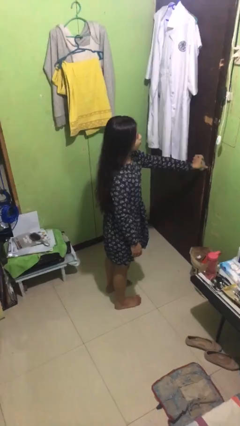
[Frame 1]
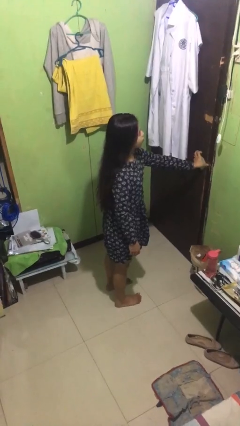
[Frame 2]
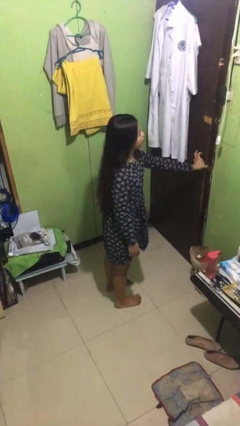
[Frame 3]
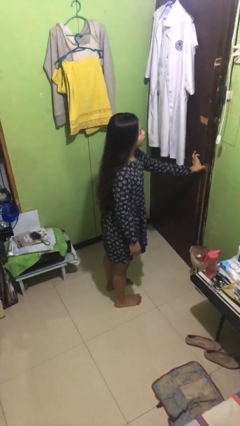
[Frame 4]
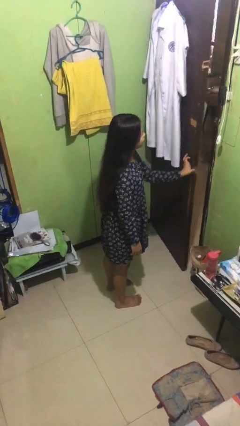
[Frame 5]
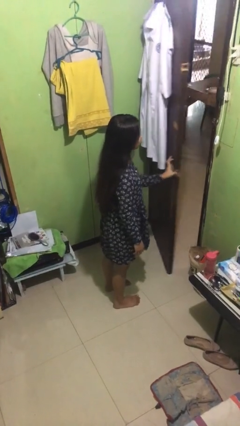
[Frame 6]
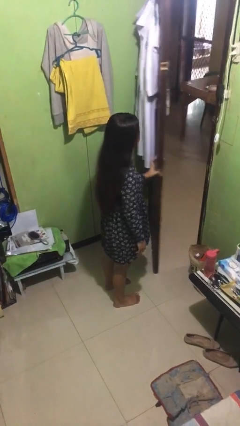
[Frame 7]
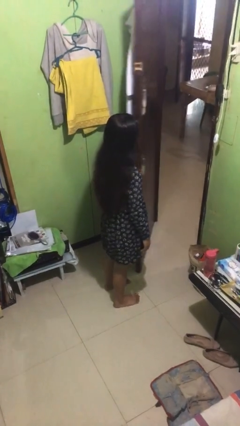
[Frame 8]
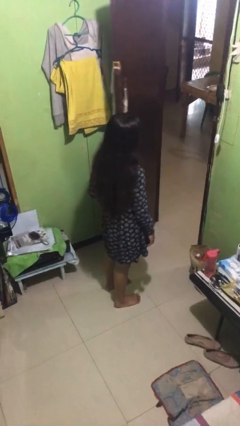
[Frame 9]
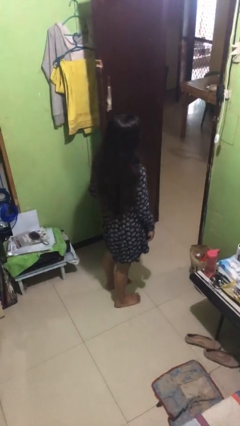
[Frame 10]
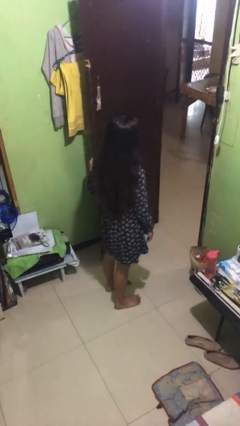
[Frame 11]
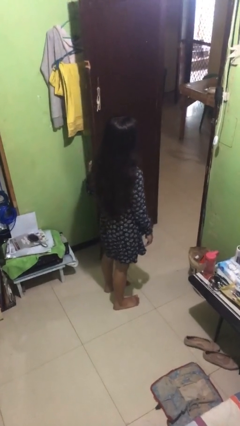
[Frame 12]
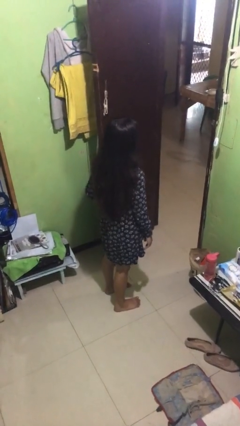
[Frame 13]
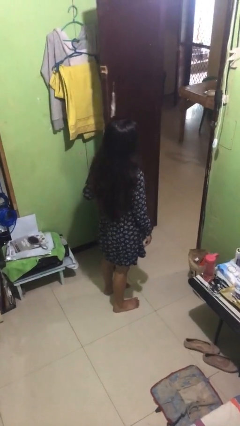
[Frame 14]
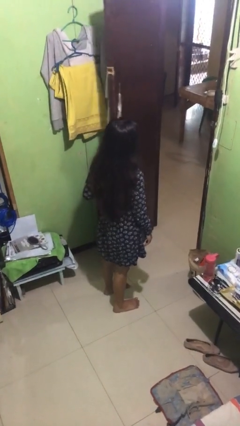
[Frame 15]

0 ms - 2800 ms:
person opens facility door

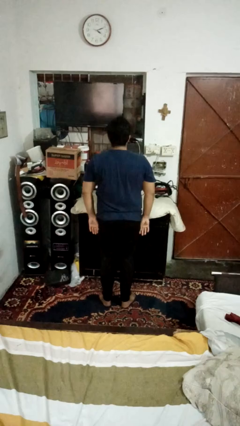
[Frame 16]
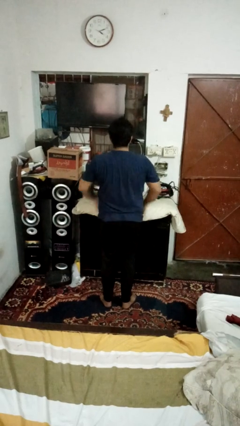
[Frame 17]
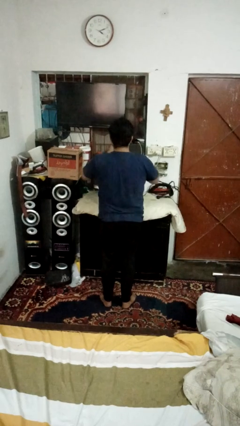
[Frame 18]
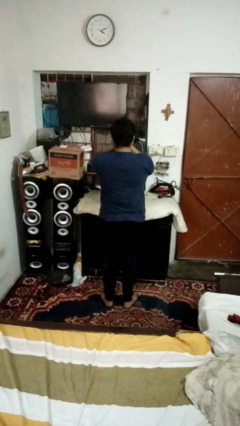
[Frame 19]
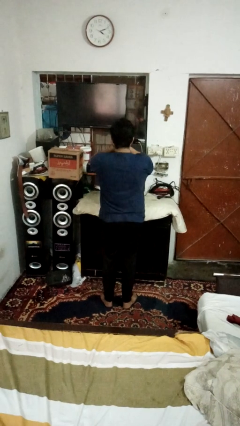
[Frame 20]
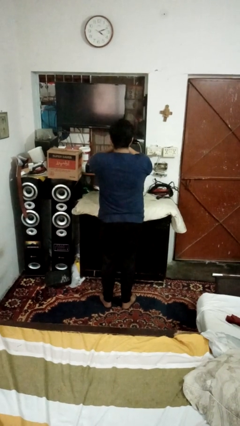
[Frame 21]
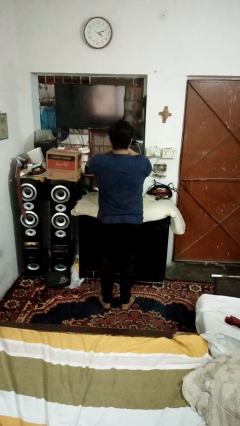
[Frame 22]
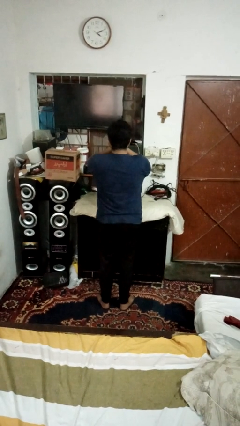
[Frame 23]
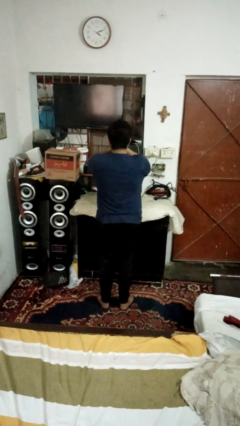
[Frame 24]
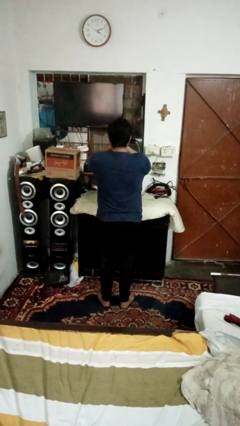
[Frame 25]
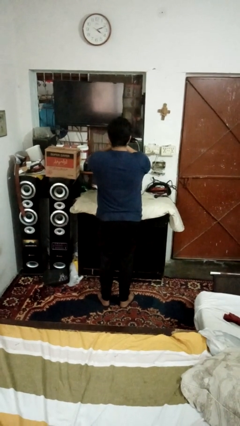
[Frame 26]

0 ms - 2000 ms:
person covers face with hands

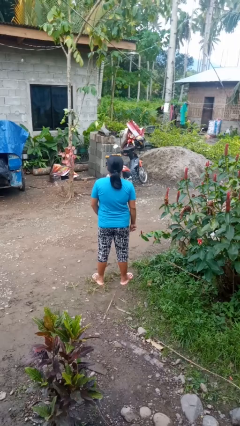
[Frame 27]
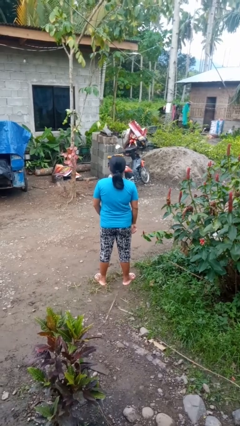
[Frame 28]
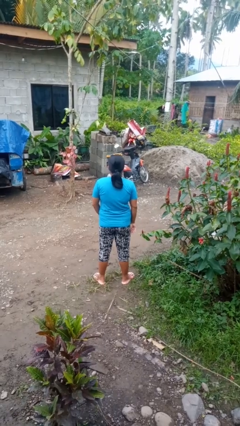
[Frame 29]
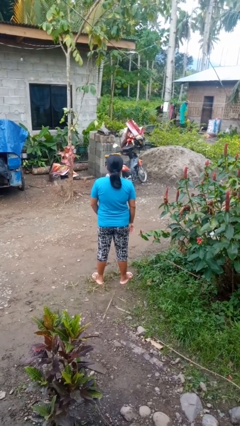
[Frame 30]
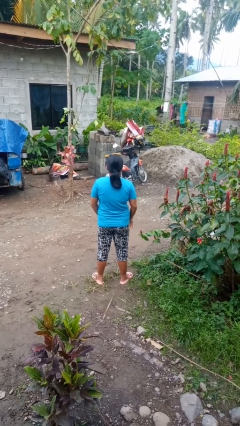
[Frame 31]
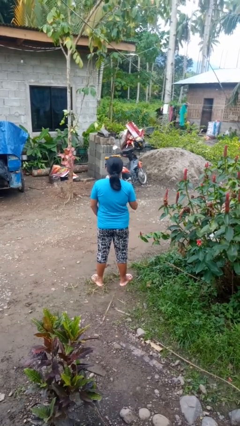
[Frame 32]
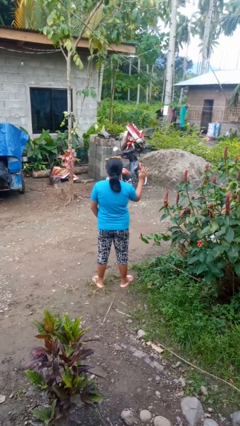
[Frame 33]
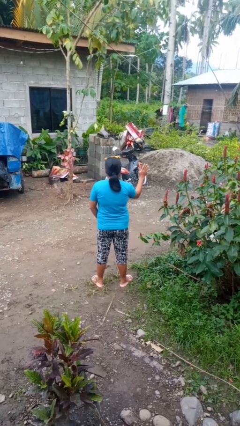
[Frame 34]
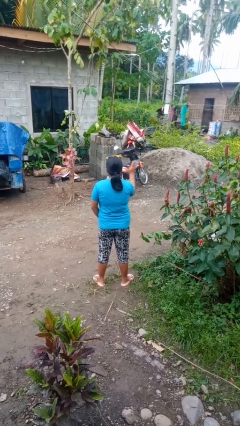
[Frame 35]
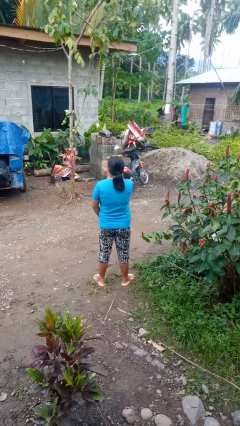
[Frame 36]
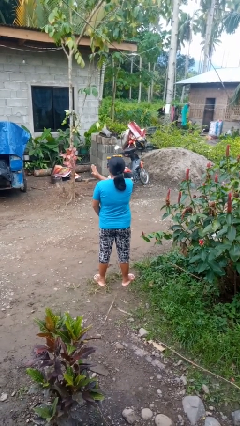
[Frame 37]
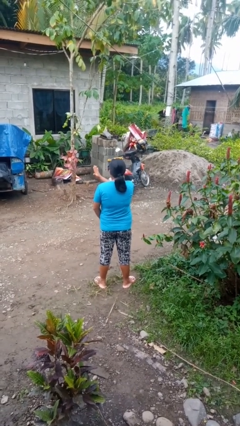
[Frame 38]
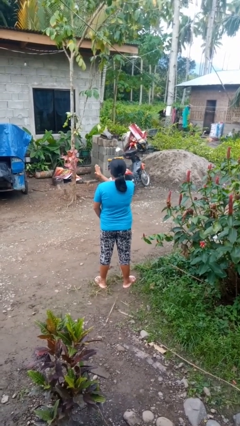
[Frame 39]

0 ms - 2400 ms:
person gestures swipe left

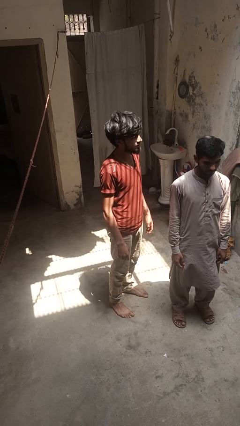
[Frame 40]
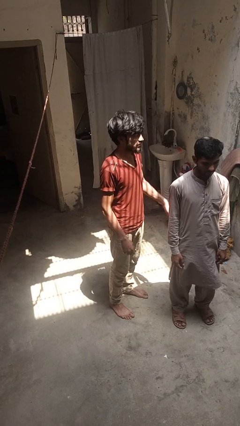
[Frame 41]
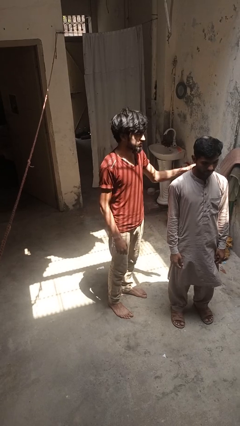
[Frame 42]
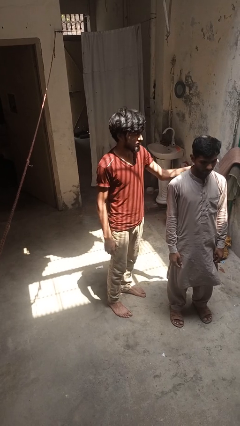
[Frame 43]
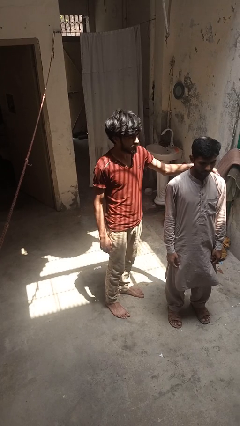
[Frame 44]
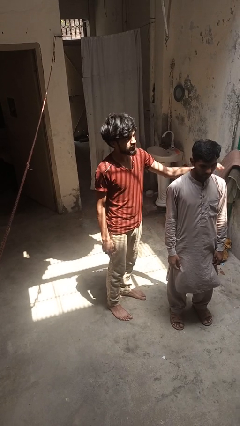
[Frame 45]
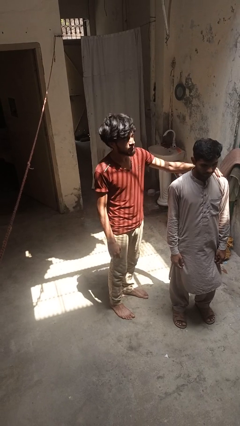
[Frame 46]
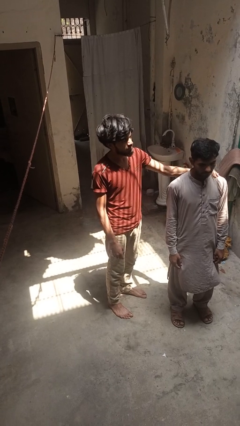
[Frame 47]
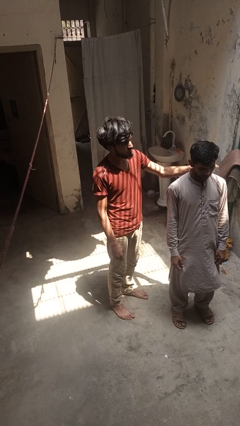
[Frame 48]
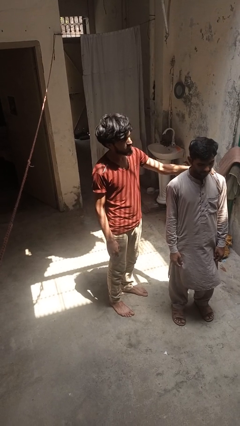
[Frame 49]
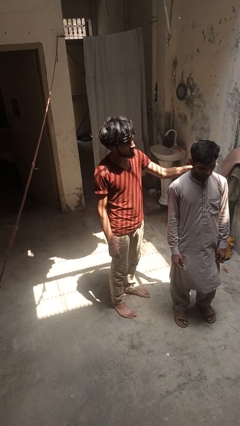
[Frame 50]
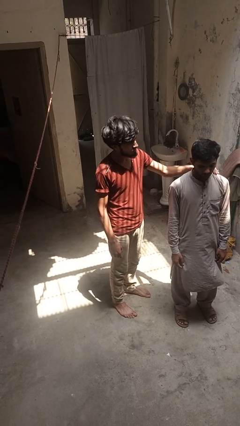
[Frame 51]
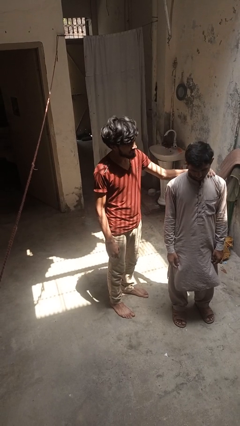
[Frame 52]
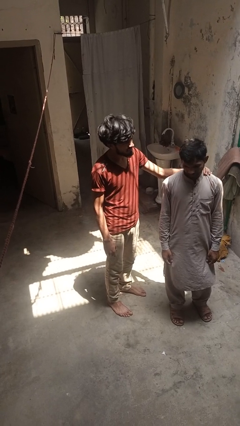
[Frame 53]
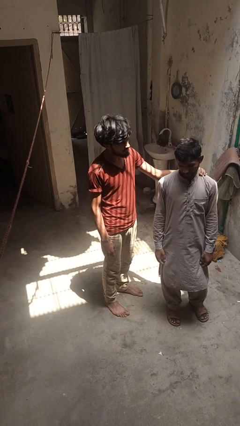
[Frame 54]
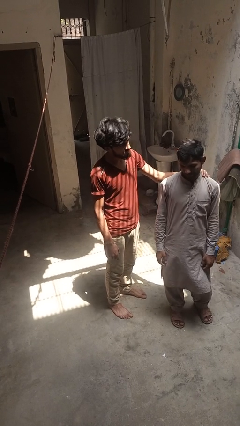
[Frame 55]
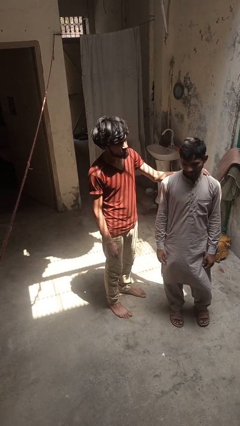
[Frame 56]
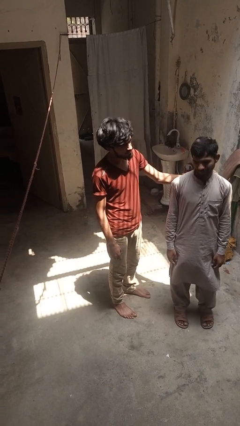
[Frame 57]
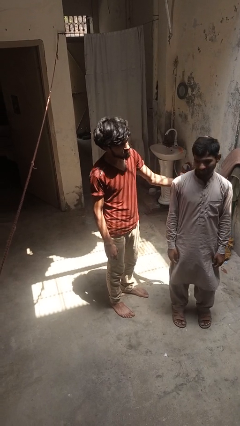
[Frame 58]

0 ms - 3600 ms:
person pounds shoulders of person

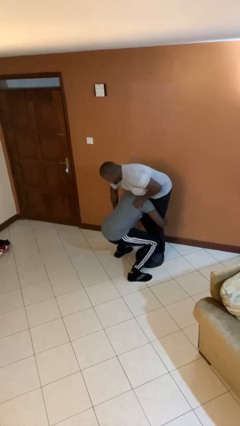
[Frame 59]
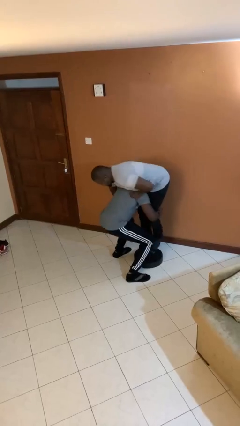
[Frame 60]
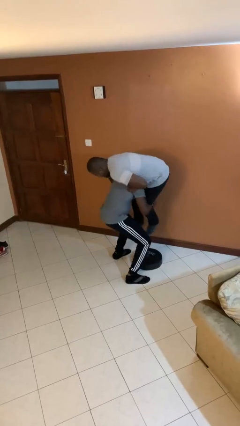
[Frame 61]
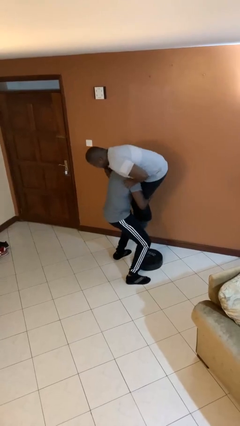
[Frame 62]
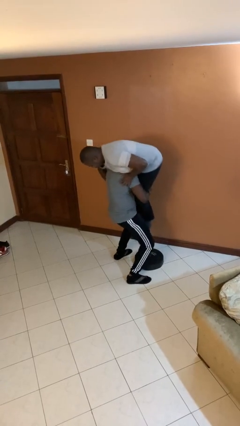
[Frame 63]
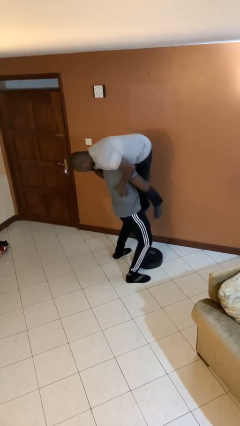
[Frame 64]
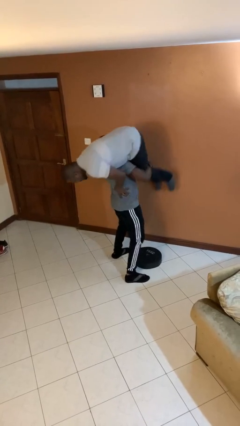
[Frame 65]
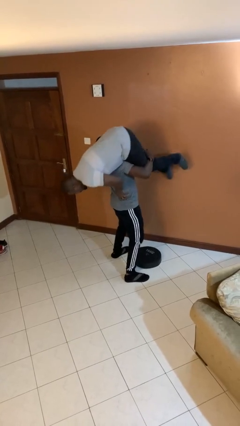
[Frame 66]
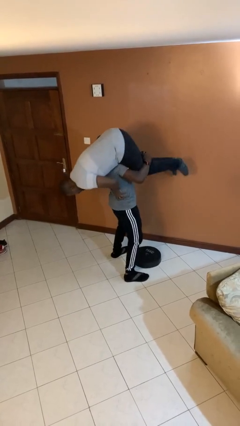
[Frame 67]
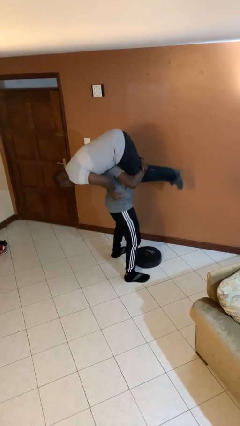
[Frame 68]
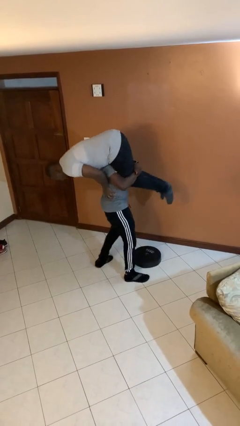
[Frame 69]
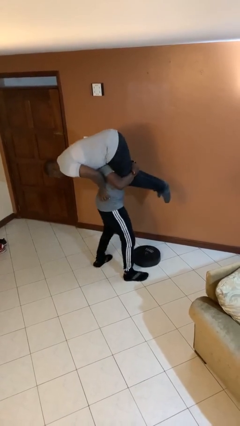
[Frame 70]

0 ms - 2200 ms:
person carries person over shoulder

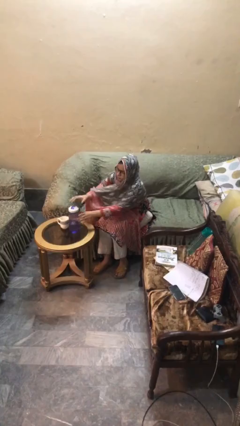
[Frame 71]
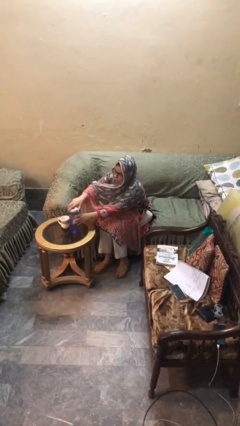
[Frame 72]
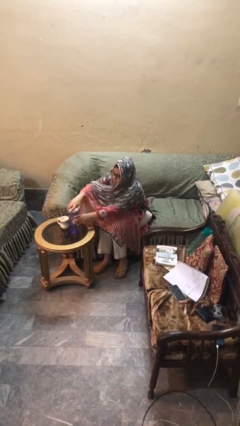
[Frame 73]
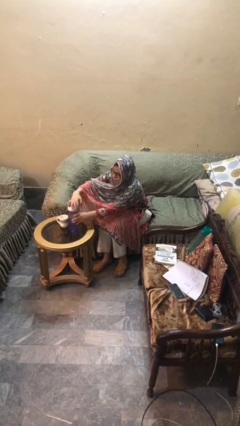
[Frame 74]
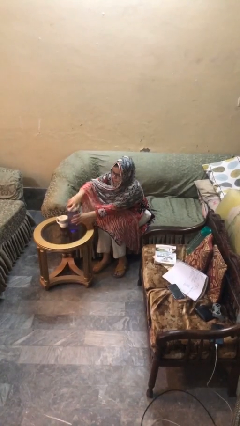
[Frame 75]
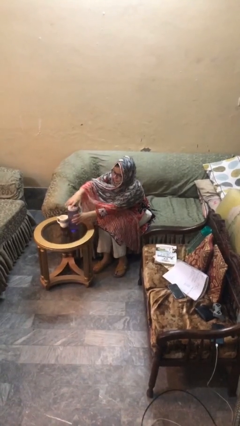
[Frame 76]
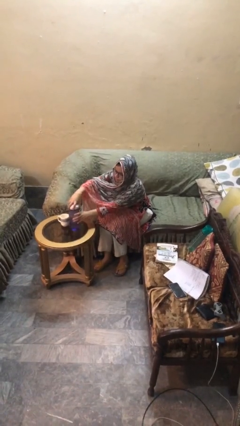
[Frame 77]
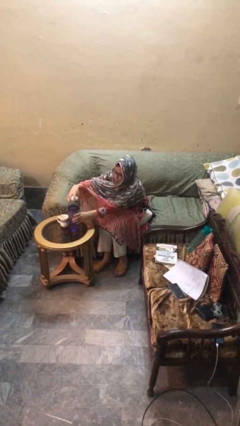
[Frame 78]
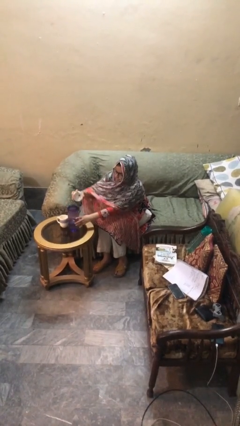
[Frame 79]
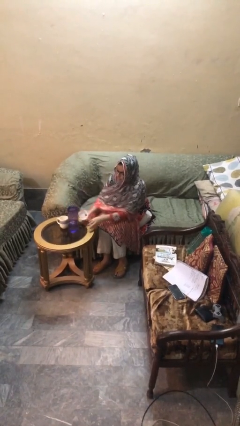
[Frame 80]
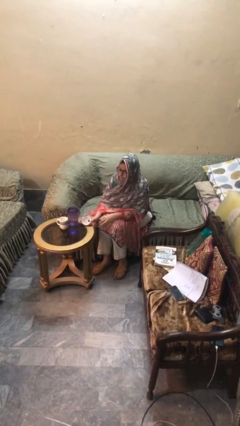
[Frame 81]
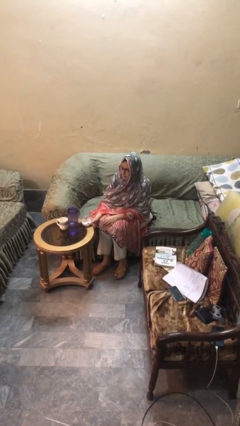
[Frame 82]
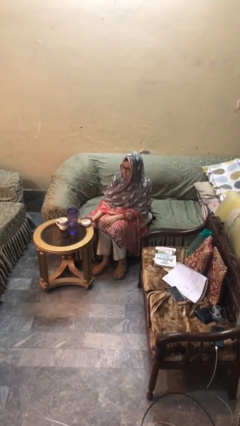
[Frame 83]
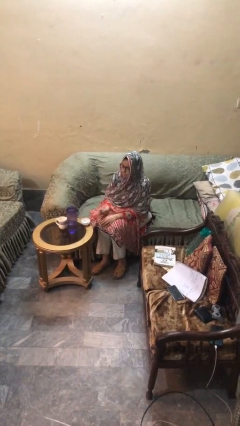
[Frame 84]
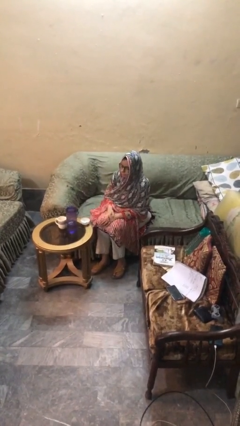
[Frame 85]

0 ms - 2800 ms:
person unscrews lid from bottle

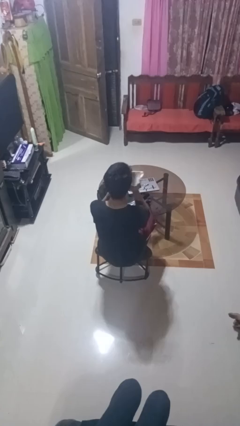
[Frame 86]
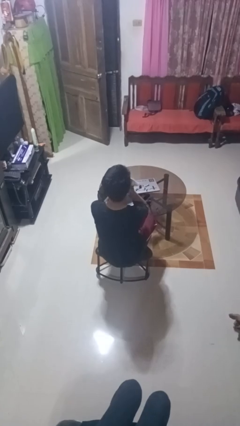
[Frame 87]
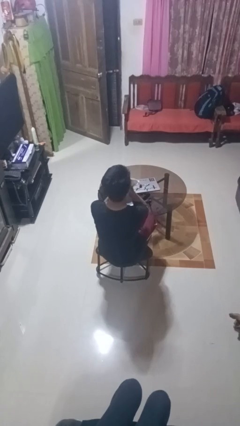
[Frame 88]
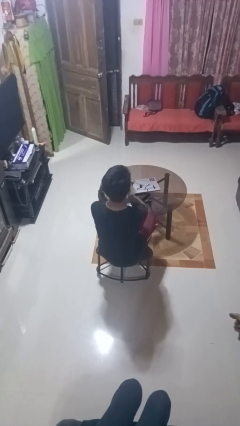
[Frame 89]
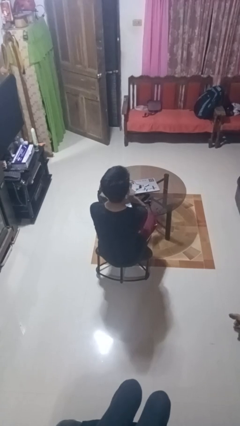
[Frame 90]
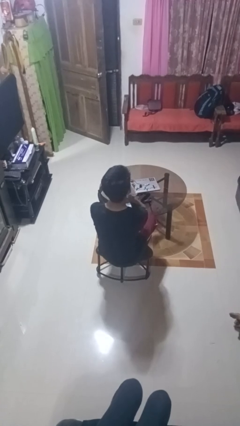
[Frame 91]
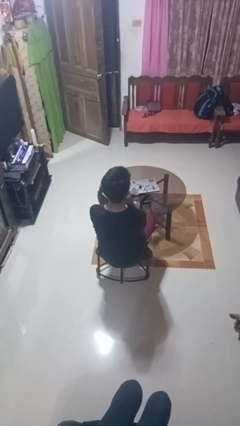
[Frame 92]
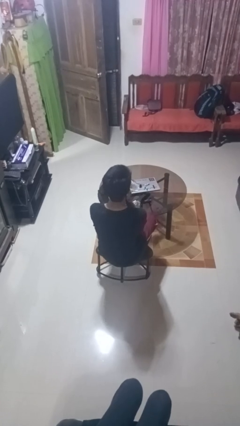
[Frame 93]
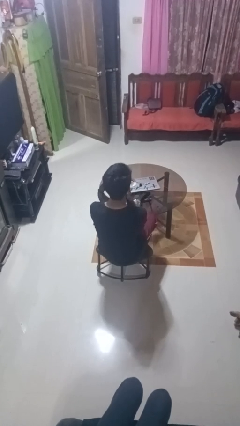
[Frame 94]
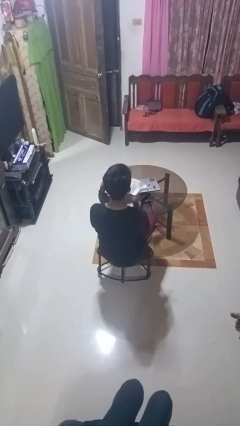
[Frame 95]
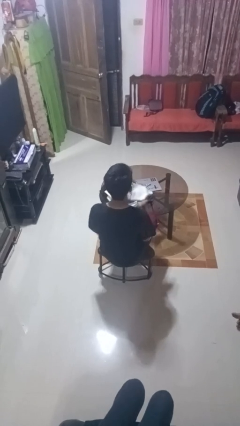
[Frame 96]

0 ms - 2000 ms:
person wipes mouth with napkin
